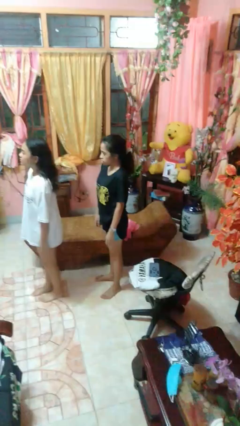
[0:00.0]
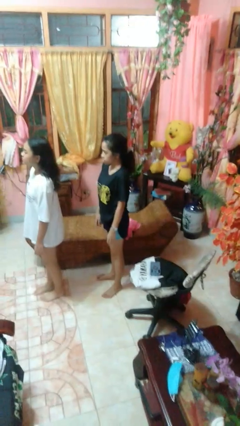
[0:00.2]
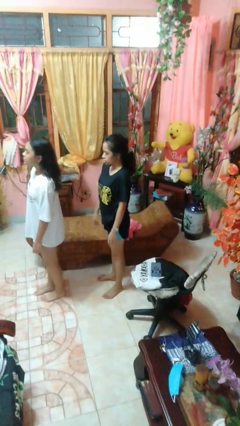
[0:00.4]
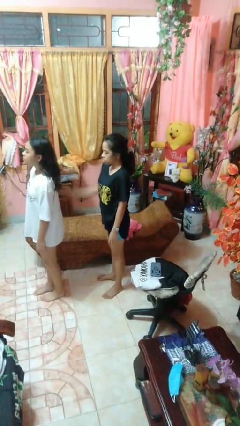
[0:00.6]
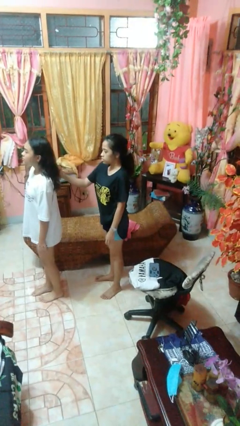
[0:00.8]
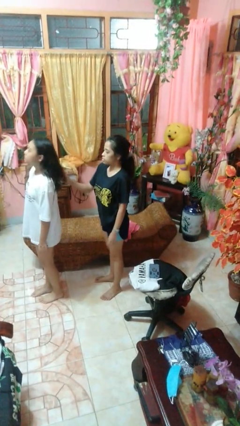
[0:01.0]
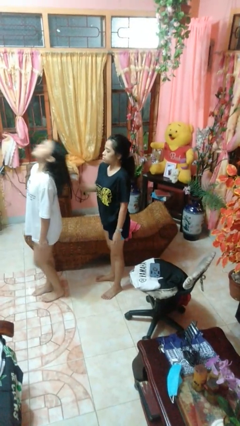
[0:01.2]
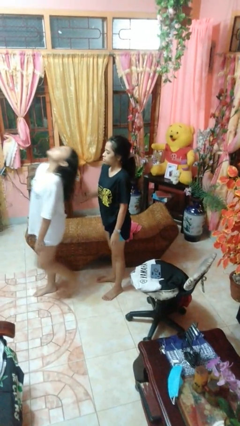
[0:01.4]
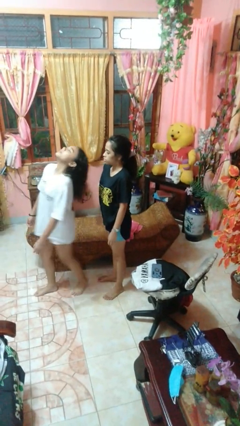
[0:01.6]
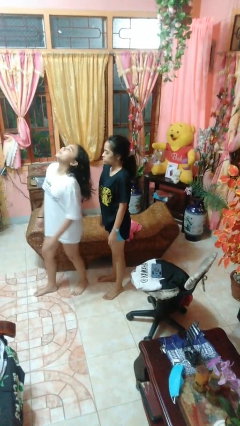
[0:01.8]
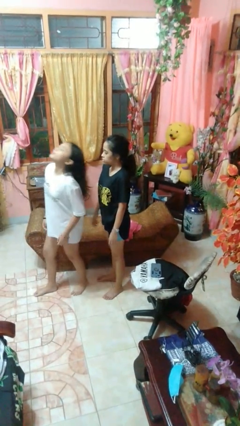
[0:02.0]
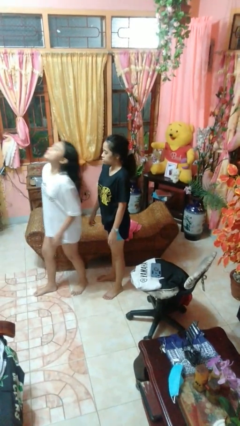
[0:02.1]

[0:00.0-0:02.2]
person grabs person by hair

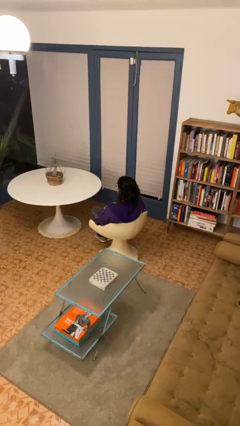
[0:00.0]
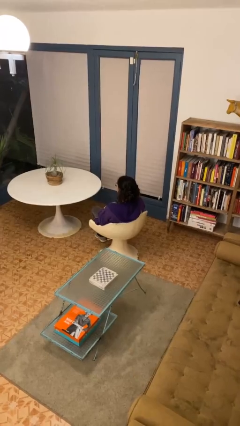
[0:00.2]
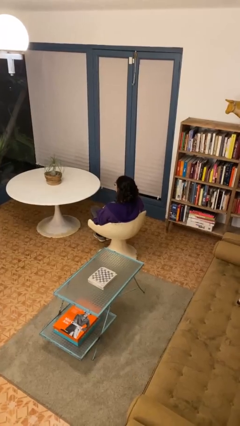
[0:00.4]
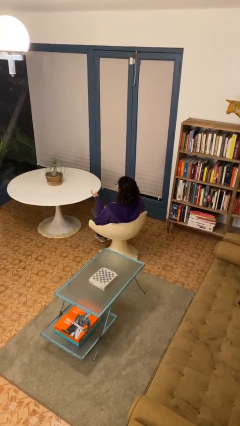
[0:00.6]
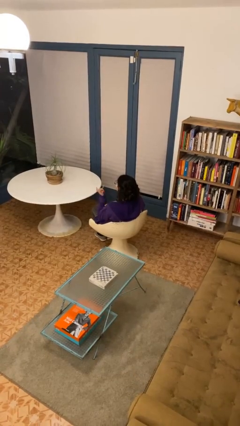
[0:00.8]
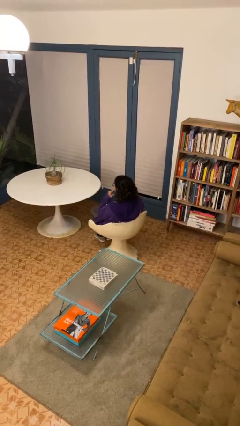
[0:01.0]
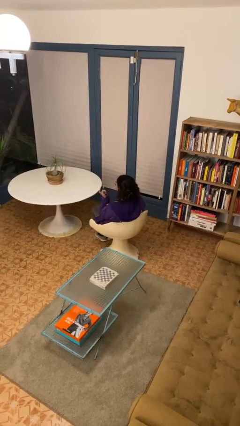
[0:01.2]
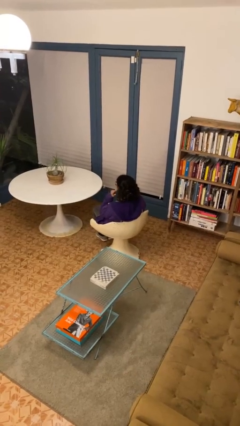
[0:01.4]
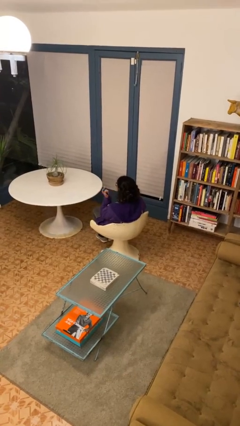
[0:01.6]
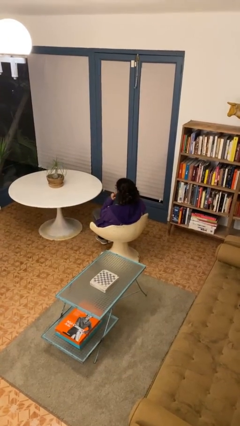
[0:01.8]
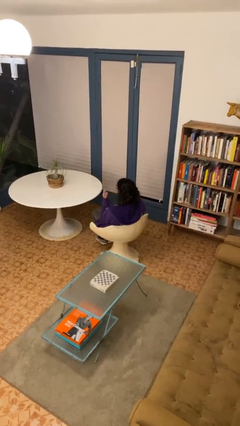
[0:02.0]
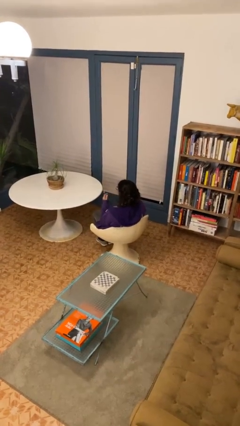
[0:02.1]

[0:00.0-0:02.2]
person gestures listen closely

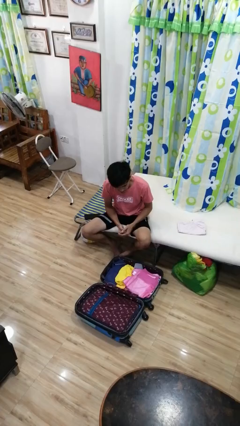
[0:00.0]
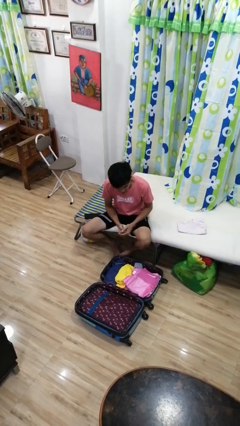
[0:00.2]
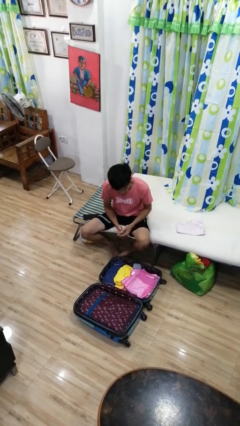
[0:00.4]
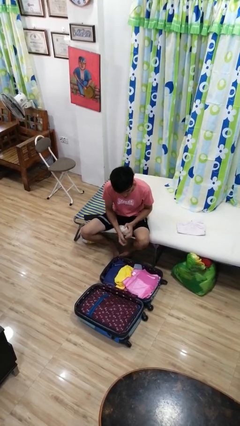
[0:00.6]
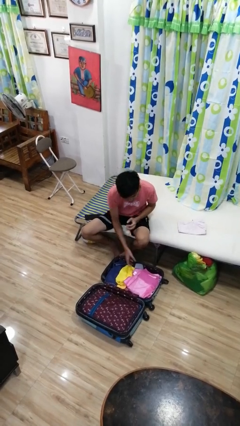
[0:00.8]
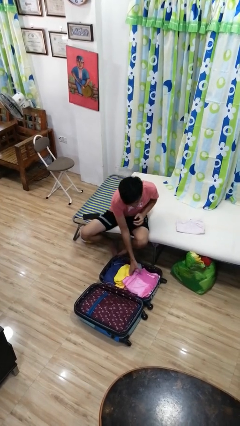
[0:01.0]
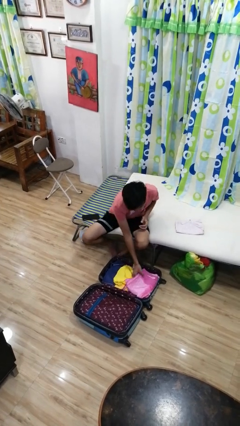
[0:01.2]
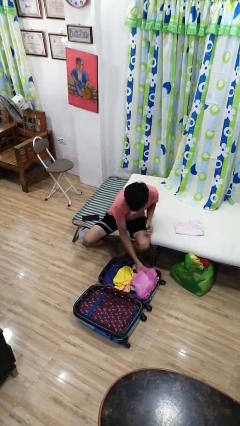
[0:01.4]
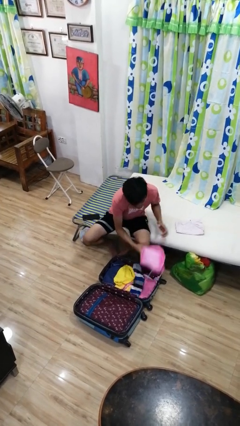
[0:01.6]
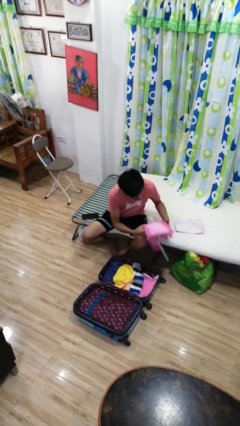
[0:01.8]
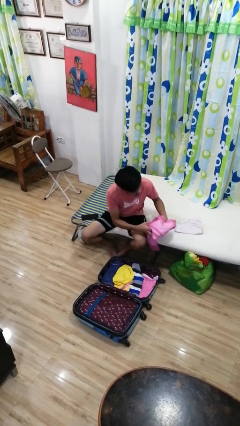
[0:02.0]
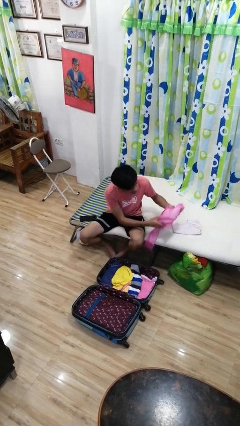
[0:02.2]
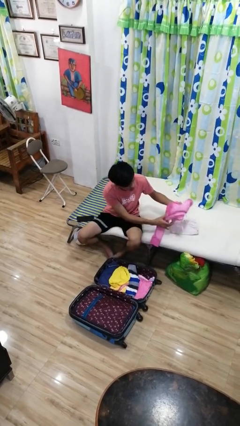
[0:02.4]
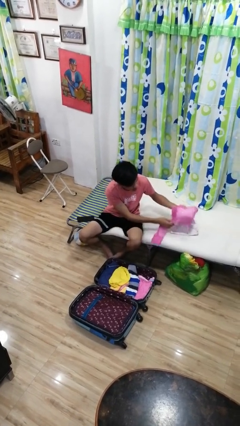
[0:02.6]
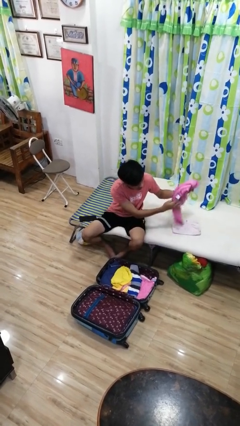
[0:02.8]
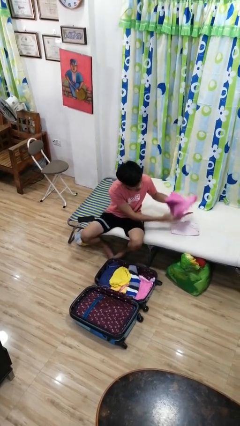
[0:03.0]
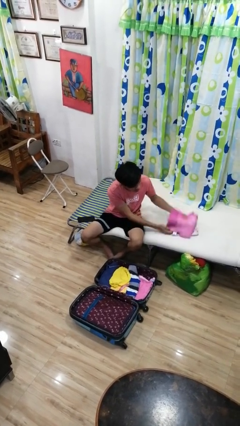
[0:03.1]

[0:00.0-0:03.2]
person unloads clothes from suitcase

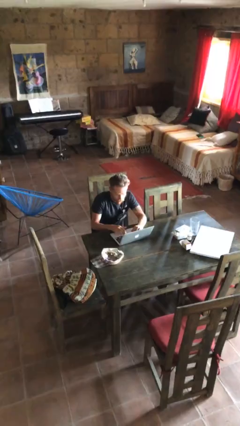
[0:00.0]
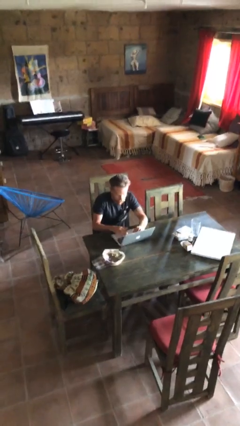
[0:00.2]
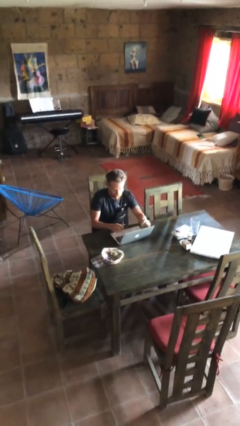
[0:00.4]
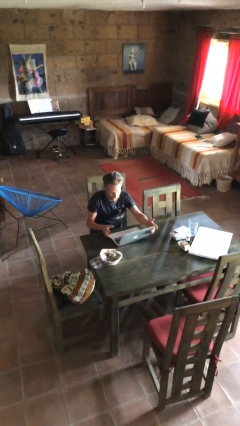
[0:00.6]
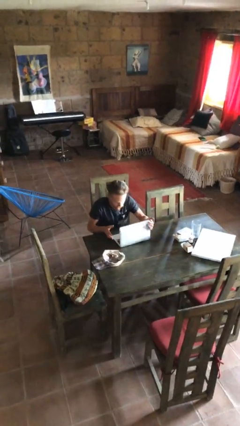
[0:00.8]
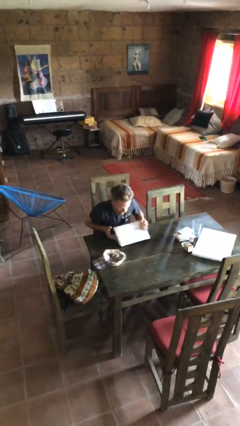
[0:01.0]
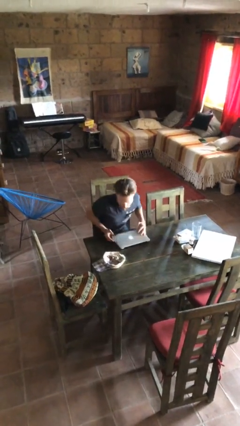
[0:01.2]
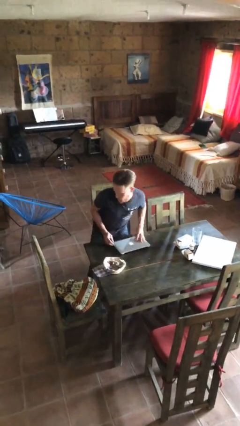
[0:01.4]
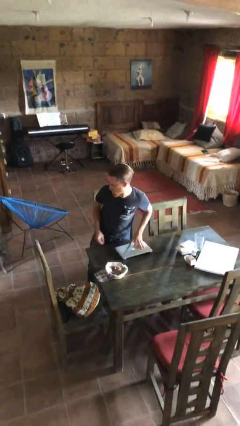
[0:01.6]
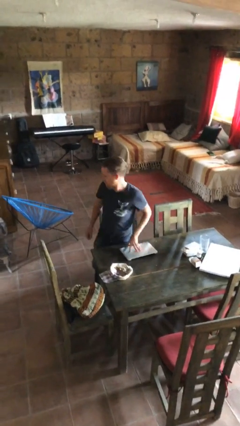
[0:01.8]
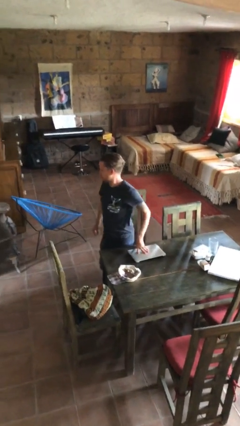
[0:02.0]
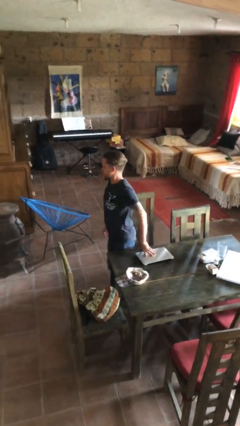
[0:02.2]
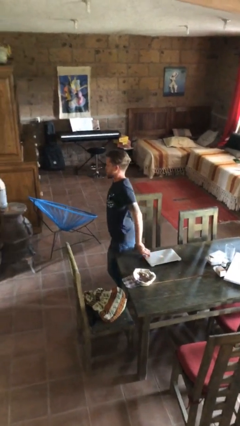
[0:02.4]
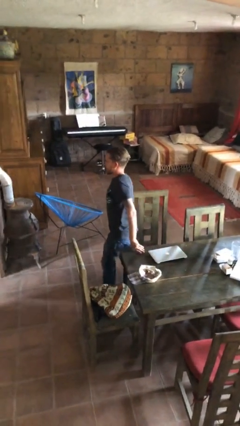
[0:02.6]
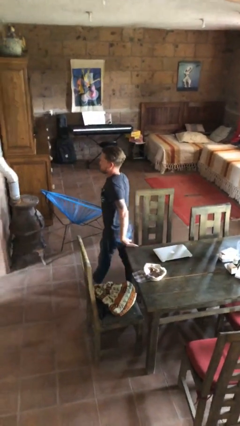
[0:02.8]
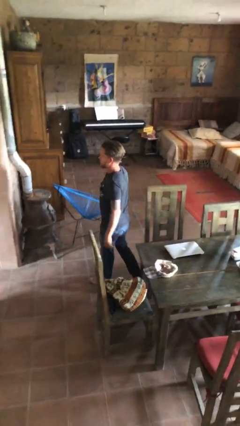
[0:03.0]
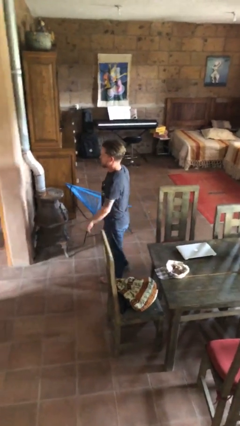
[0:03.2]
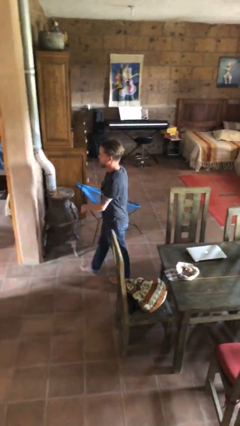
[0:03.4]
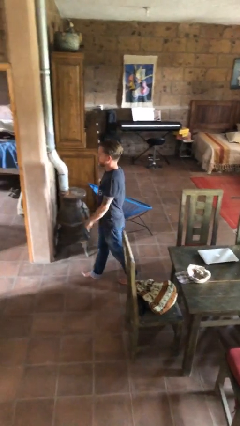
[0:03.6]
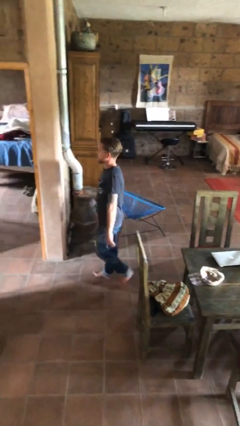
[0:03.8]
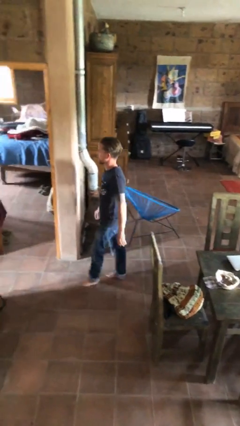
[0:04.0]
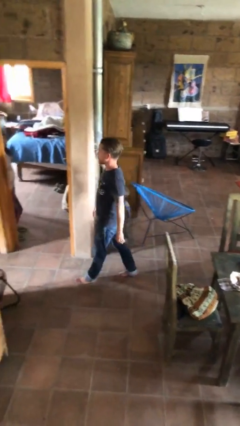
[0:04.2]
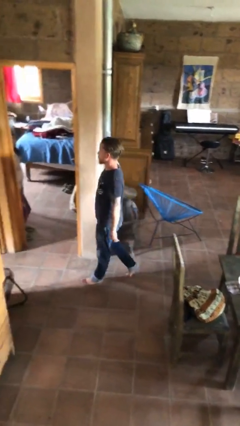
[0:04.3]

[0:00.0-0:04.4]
person stands up

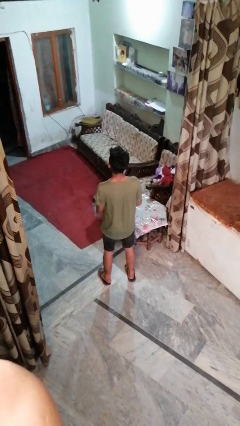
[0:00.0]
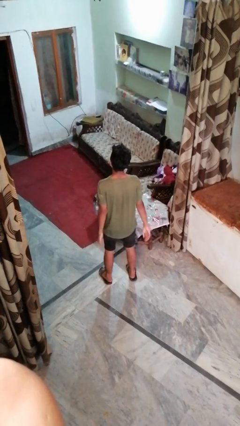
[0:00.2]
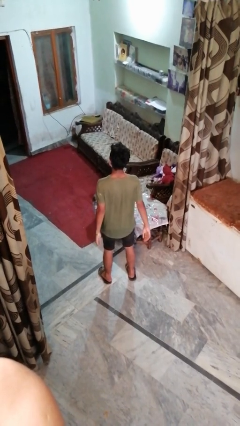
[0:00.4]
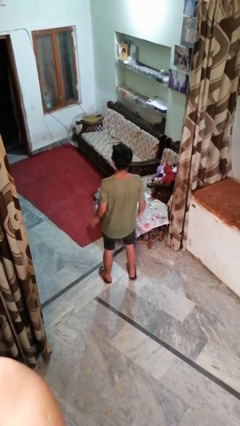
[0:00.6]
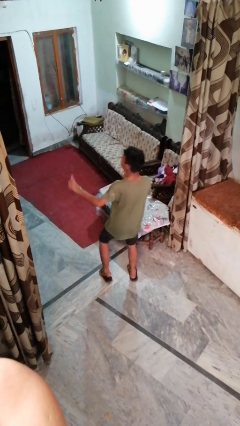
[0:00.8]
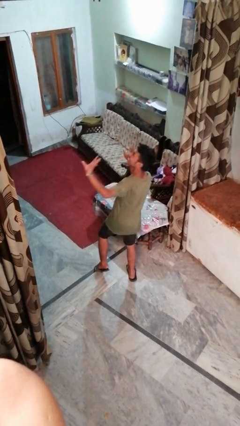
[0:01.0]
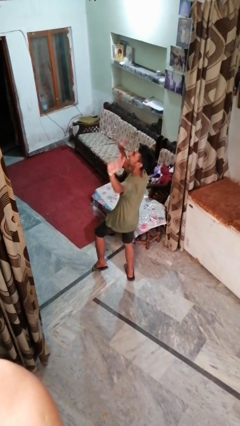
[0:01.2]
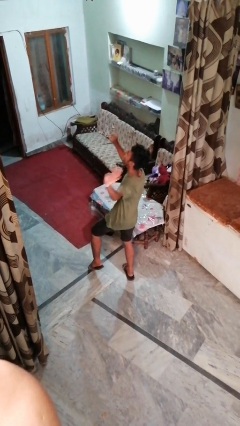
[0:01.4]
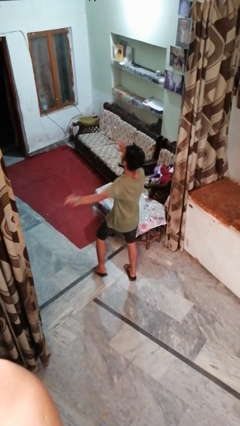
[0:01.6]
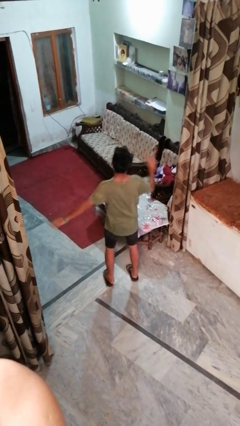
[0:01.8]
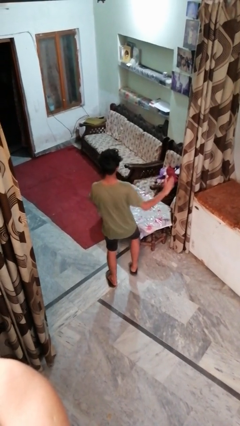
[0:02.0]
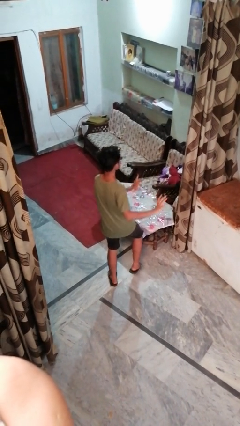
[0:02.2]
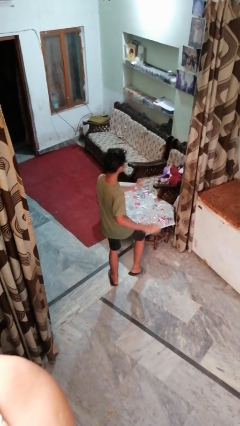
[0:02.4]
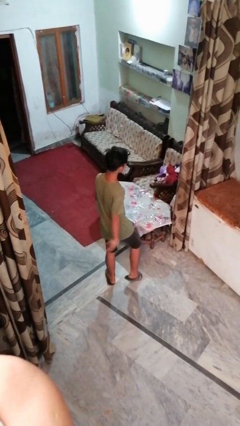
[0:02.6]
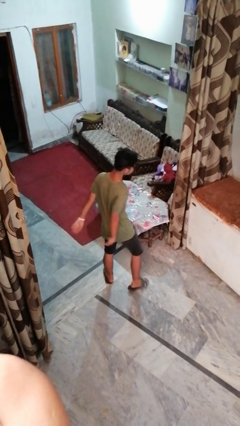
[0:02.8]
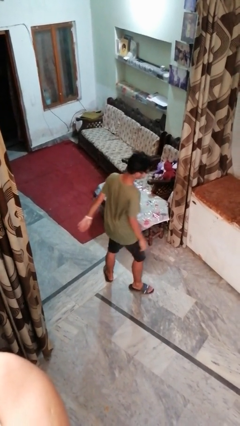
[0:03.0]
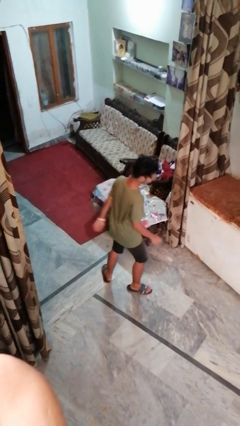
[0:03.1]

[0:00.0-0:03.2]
person dances in place

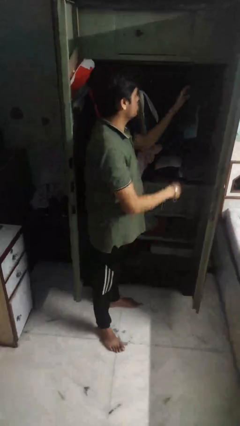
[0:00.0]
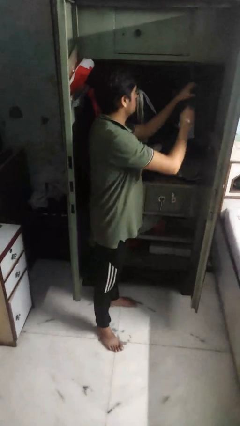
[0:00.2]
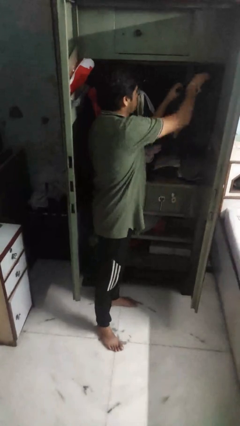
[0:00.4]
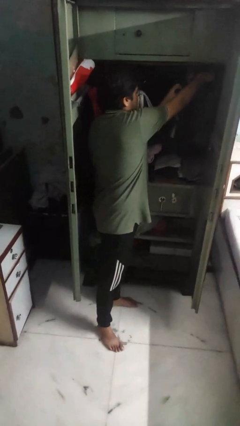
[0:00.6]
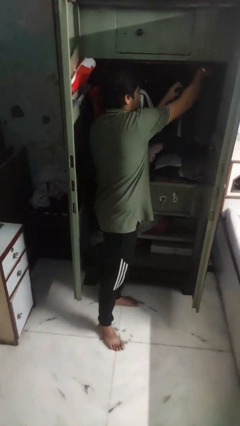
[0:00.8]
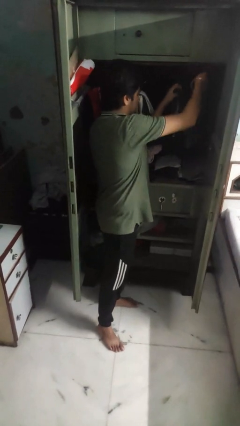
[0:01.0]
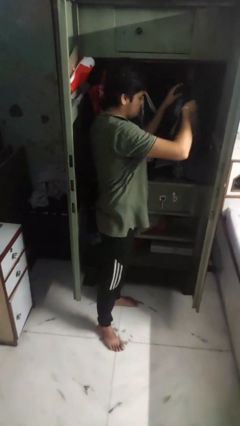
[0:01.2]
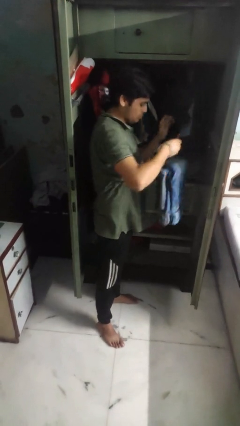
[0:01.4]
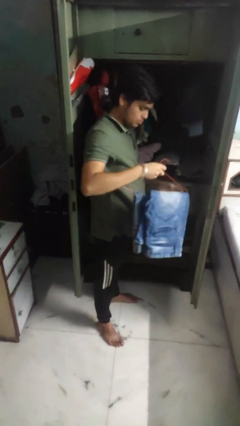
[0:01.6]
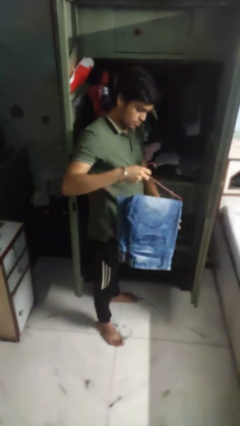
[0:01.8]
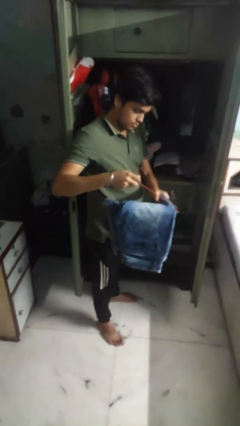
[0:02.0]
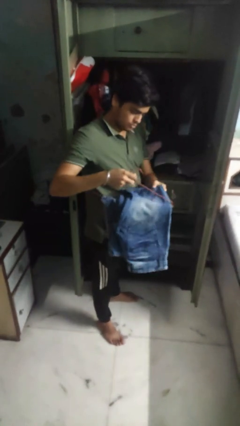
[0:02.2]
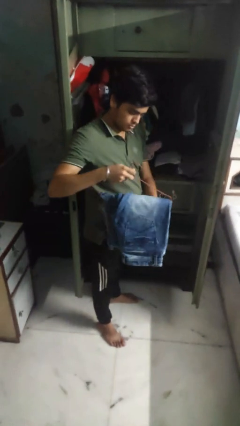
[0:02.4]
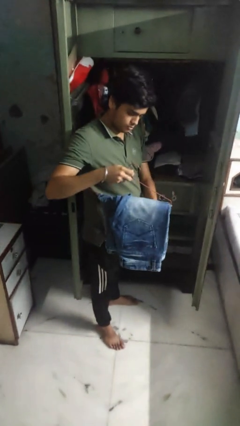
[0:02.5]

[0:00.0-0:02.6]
person takes clothes from closet
